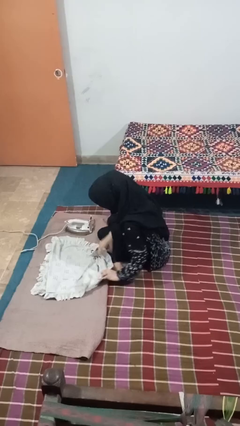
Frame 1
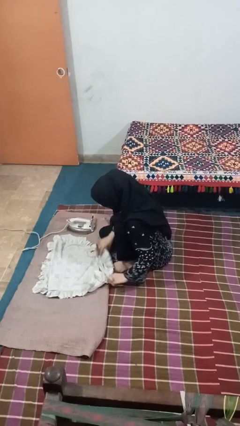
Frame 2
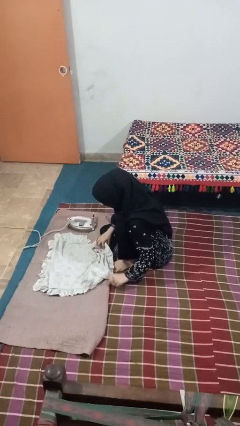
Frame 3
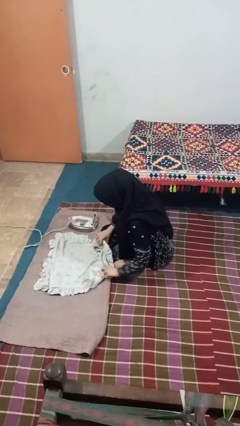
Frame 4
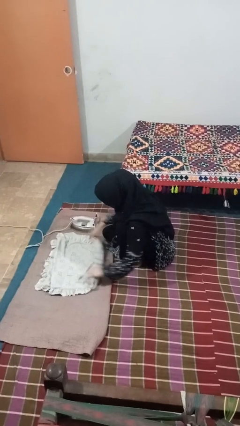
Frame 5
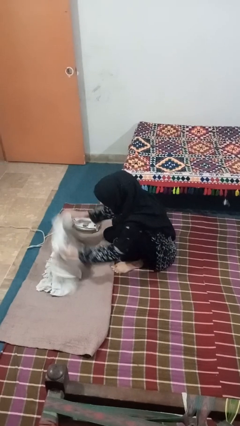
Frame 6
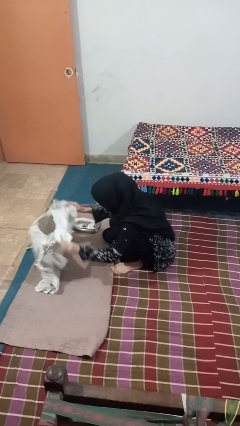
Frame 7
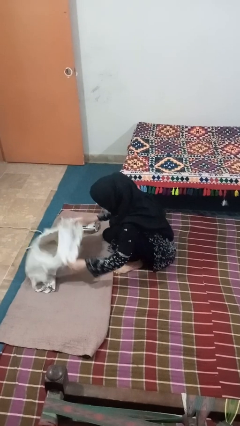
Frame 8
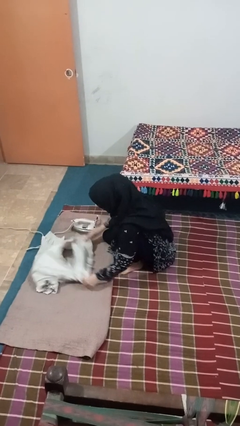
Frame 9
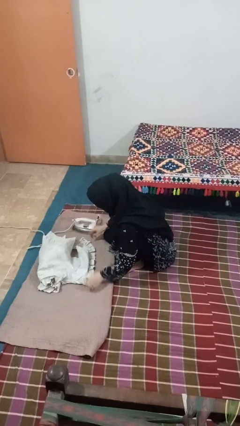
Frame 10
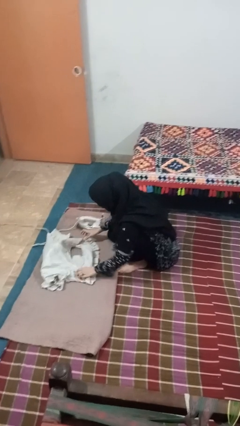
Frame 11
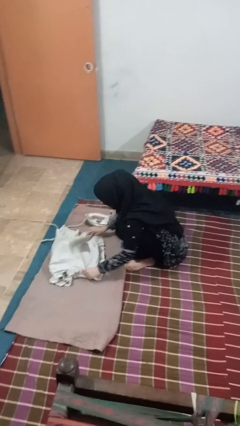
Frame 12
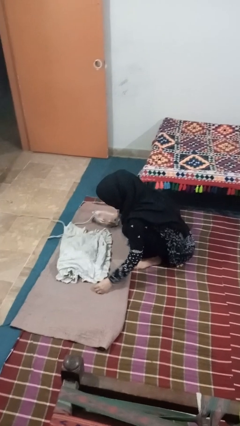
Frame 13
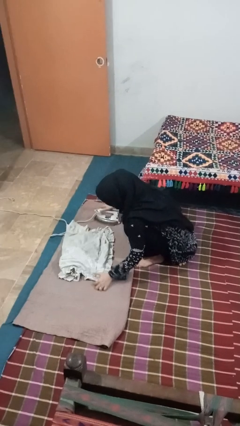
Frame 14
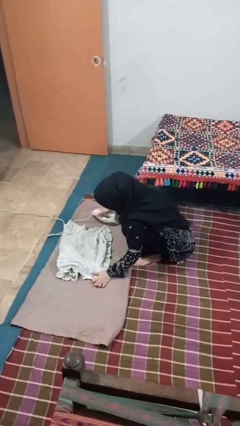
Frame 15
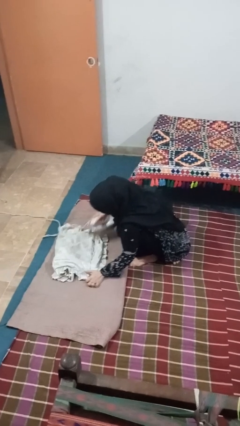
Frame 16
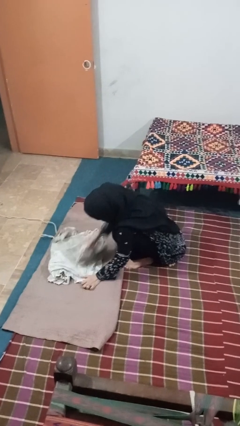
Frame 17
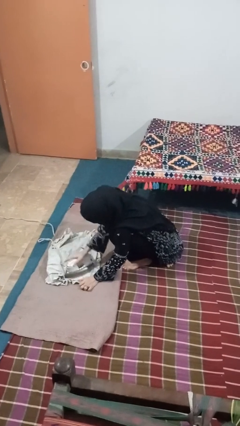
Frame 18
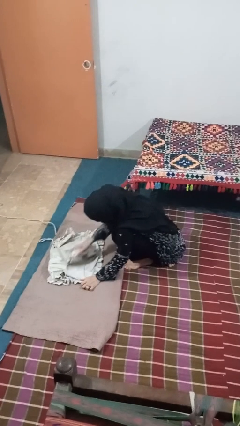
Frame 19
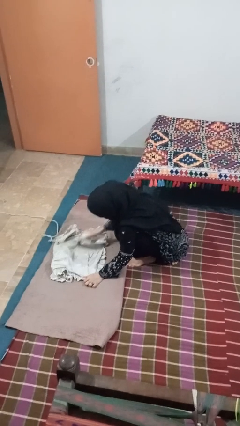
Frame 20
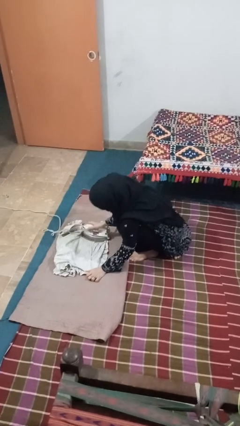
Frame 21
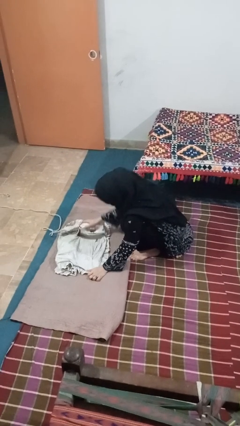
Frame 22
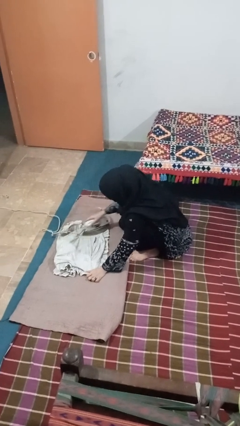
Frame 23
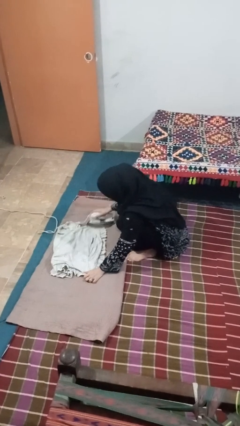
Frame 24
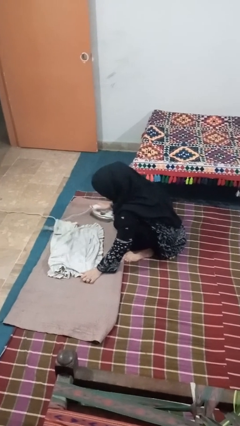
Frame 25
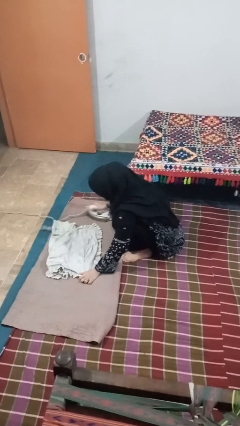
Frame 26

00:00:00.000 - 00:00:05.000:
person irons clothes

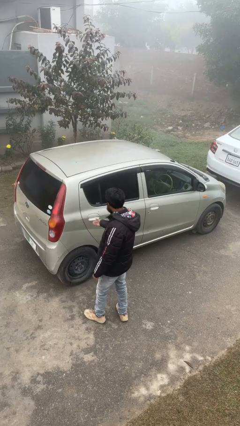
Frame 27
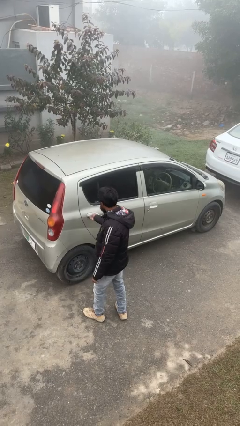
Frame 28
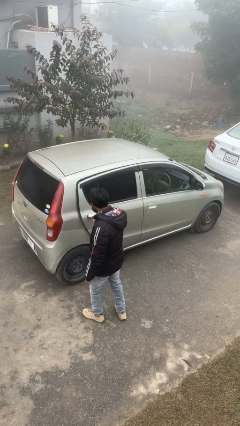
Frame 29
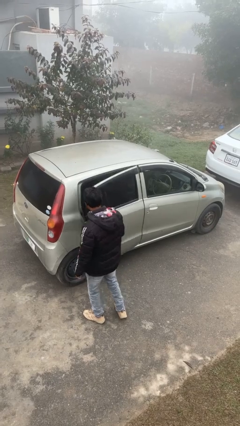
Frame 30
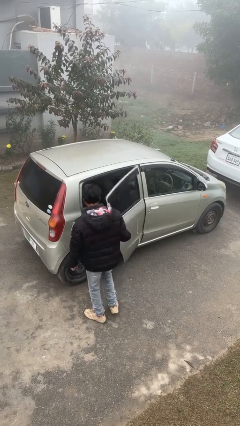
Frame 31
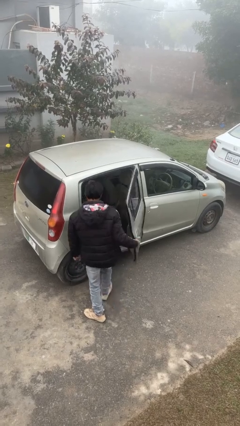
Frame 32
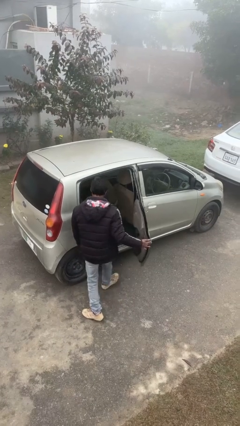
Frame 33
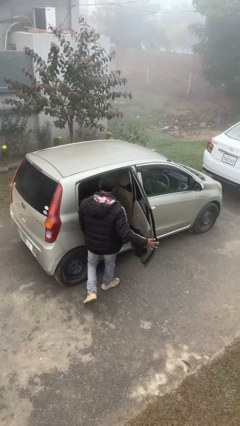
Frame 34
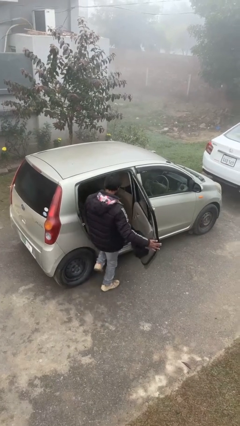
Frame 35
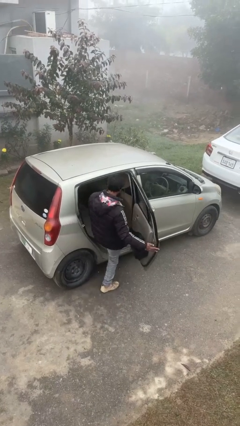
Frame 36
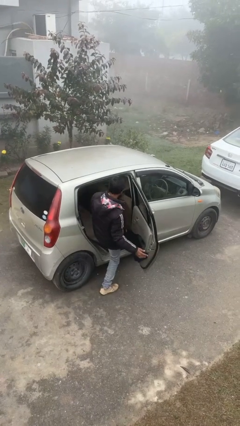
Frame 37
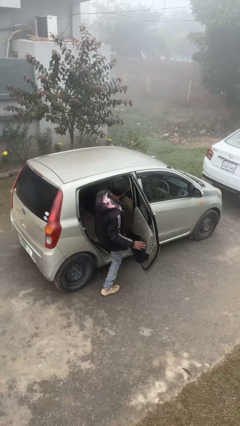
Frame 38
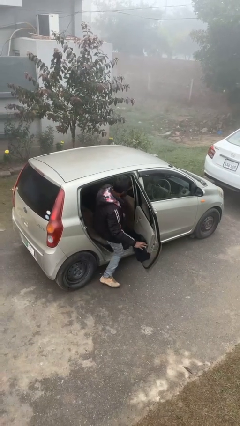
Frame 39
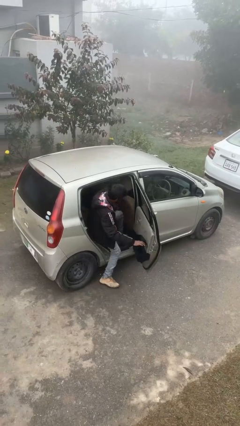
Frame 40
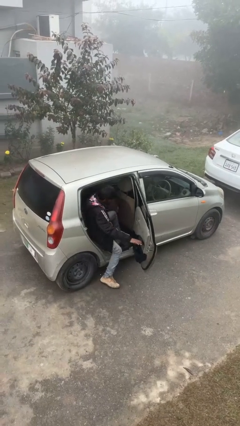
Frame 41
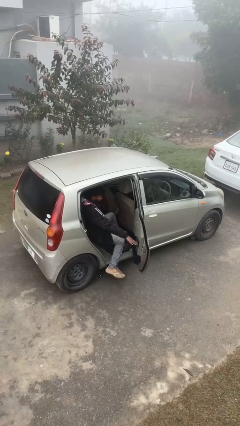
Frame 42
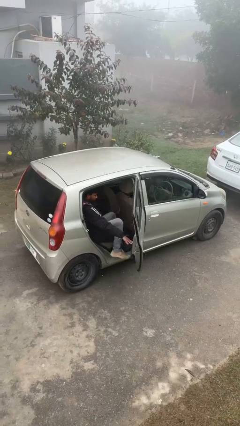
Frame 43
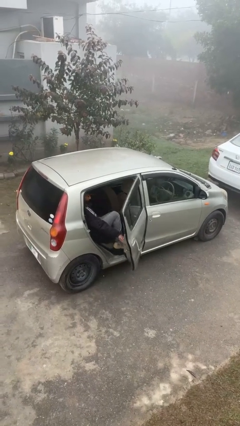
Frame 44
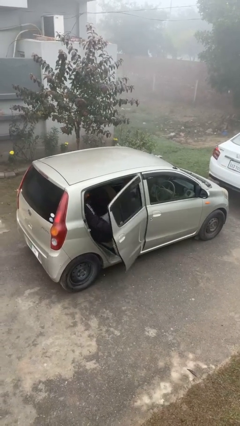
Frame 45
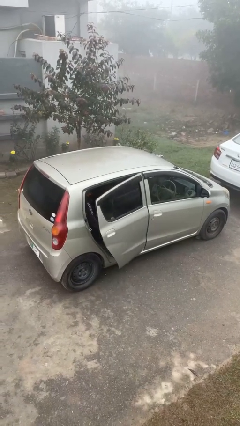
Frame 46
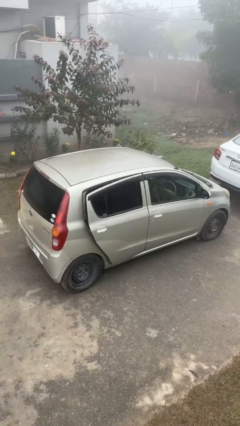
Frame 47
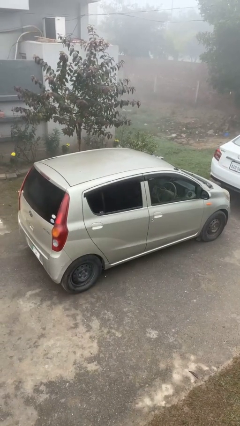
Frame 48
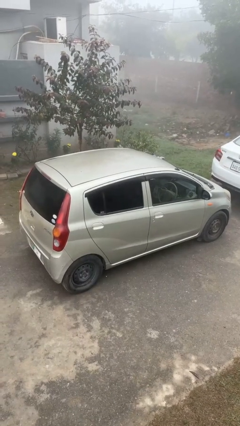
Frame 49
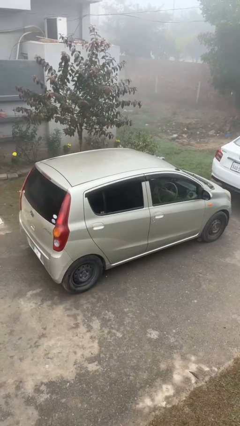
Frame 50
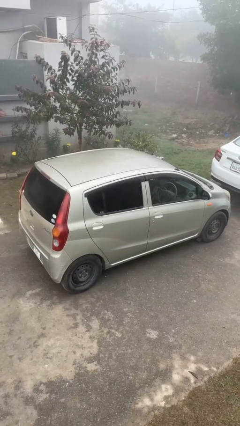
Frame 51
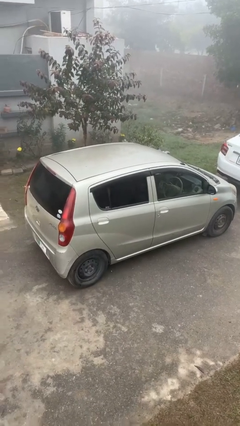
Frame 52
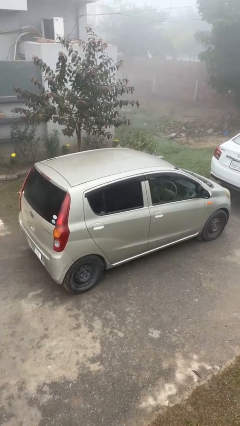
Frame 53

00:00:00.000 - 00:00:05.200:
car picks up person

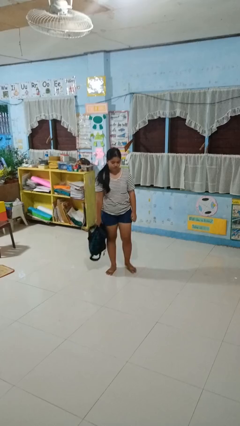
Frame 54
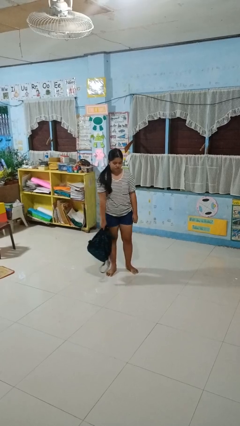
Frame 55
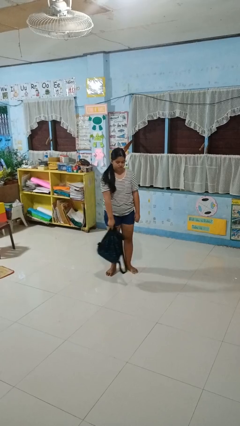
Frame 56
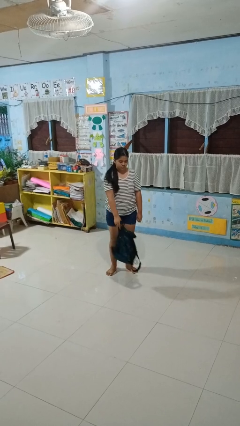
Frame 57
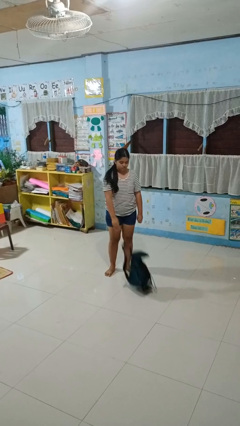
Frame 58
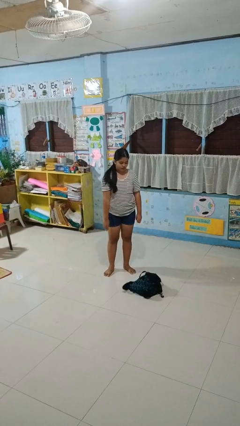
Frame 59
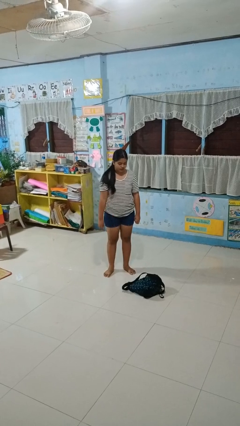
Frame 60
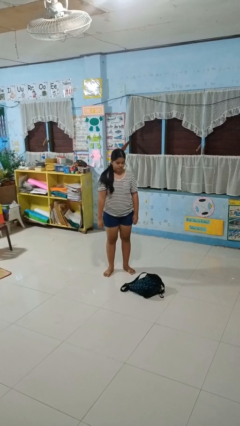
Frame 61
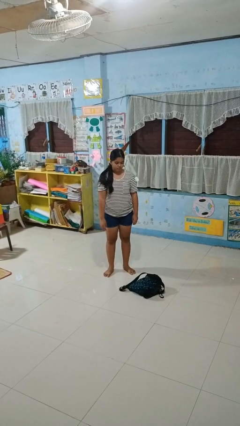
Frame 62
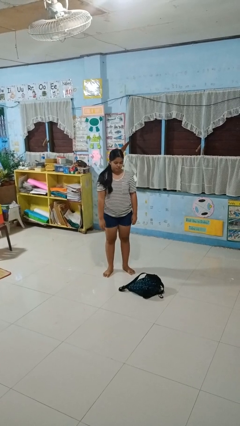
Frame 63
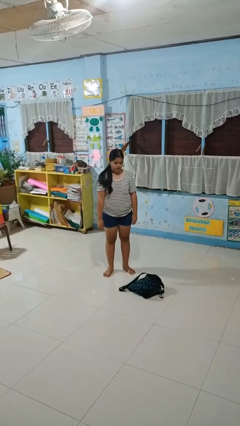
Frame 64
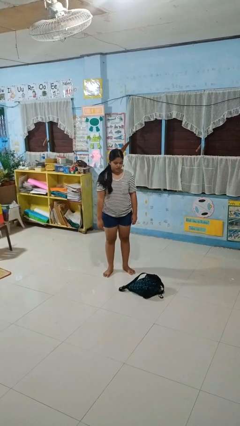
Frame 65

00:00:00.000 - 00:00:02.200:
person drops object

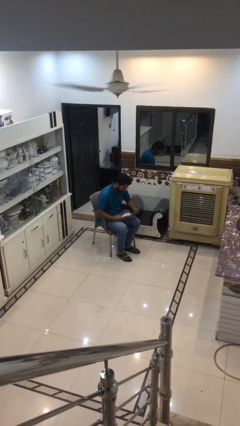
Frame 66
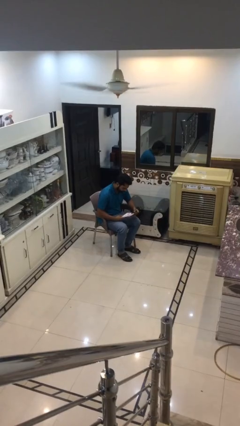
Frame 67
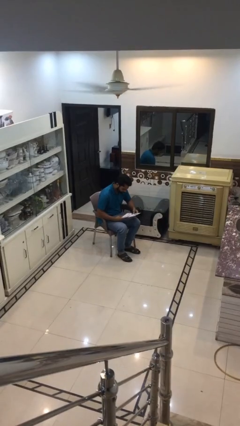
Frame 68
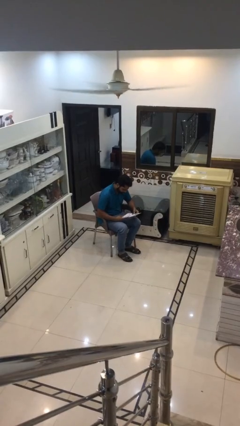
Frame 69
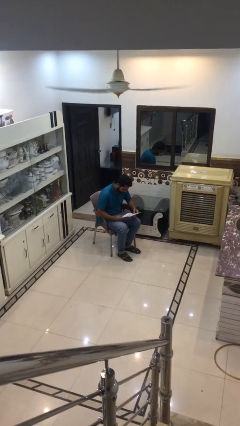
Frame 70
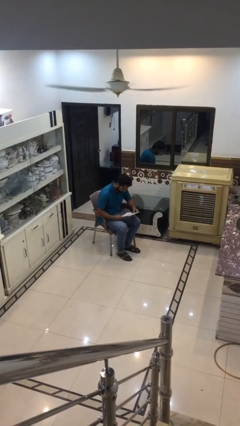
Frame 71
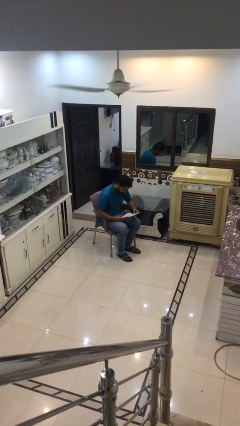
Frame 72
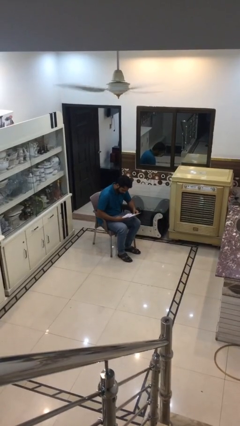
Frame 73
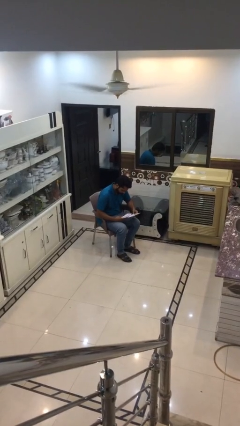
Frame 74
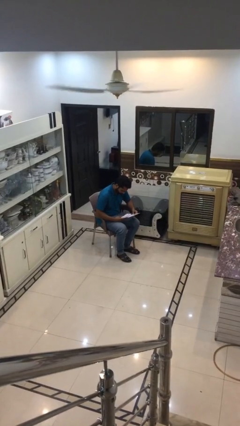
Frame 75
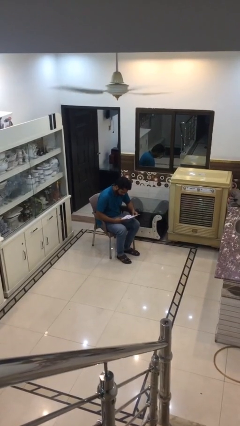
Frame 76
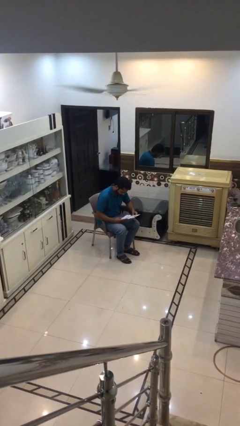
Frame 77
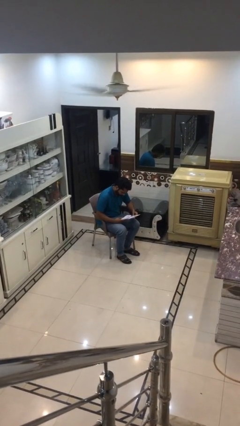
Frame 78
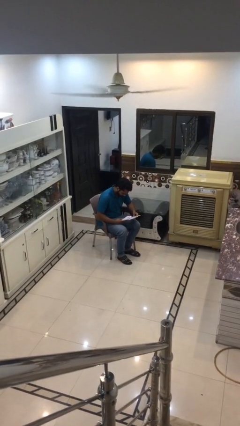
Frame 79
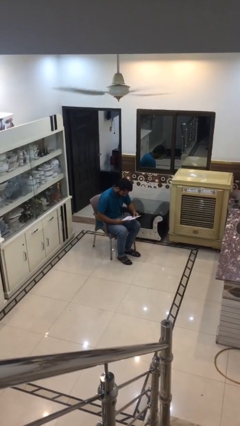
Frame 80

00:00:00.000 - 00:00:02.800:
person reads document

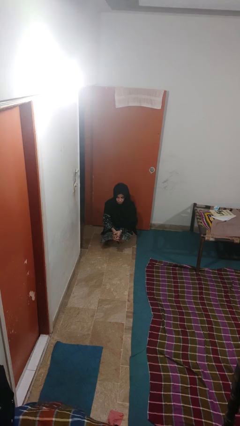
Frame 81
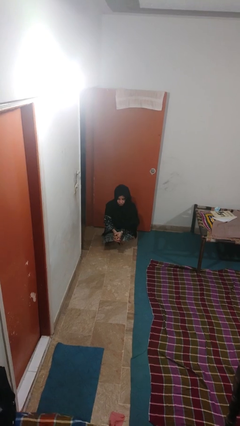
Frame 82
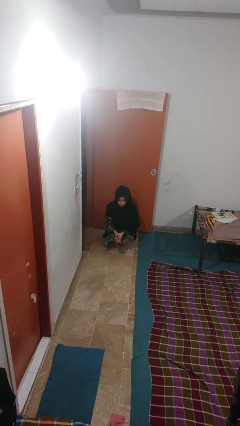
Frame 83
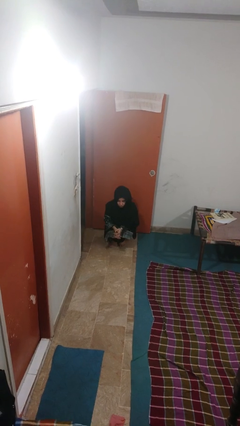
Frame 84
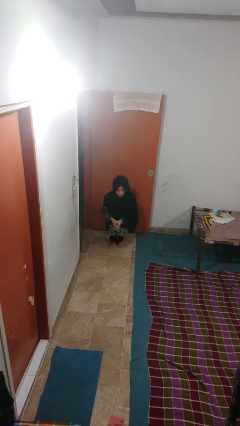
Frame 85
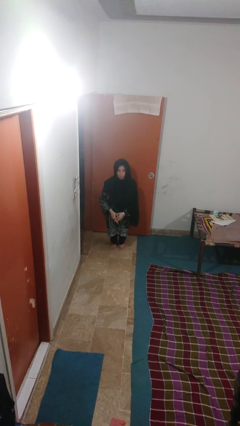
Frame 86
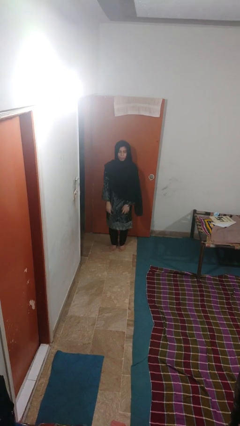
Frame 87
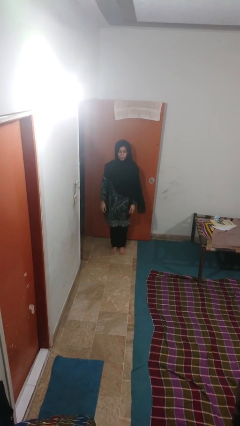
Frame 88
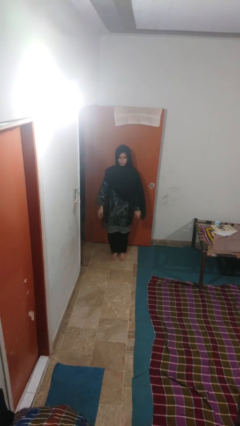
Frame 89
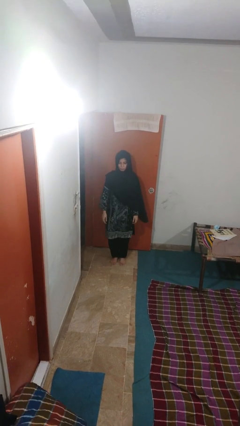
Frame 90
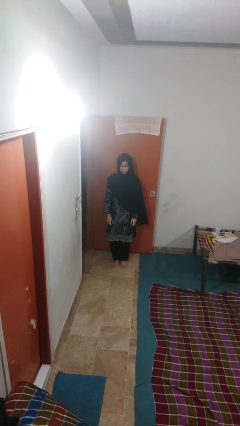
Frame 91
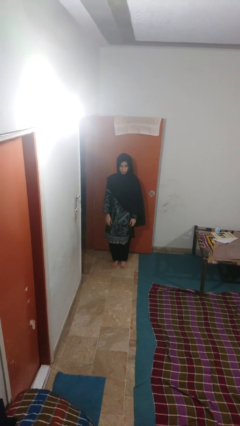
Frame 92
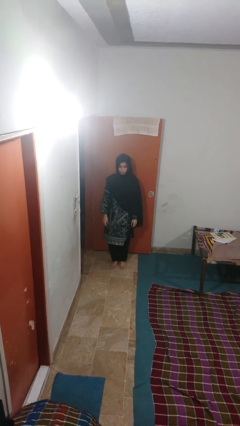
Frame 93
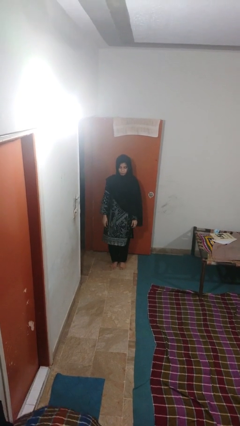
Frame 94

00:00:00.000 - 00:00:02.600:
person stands up
